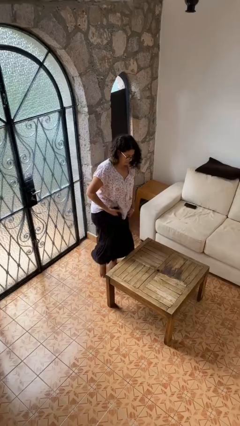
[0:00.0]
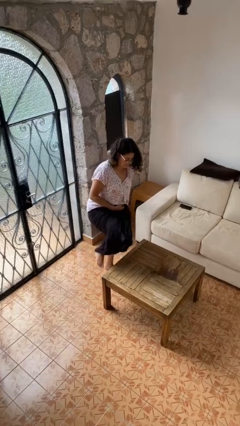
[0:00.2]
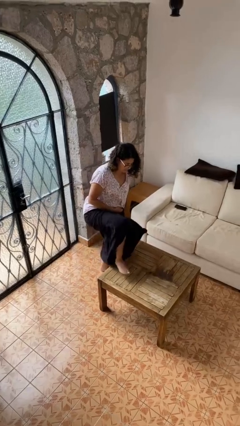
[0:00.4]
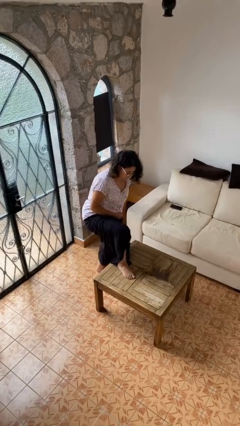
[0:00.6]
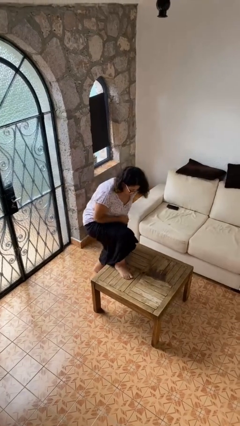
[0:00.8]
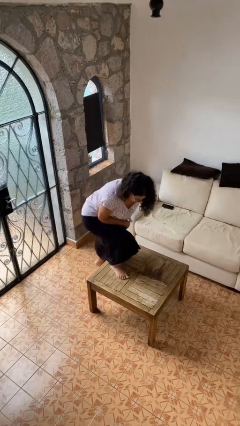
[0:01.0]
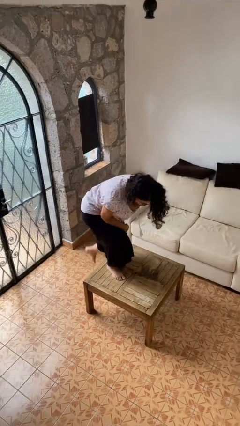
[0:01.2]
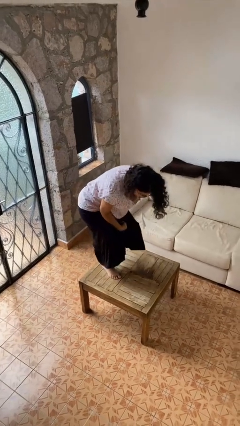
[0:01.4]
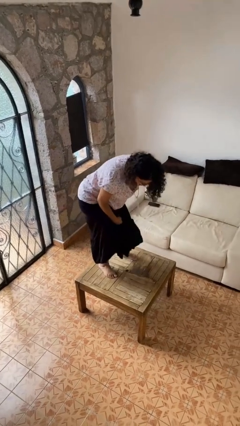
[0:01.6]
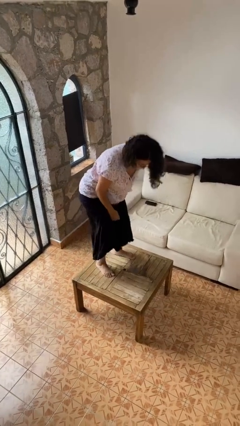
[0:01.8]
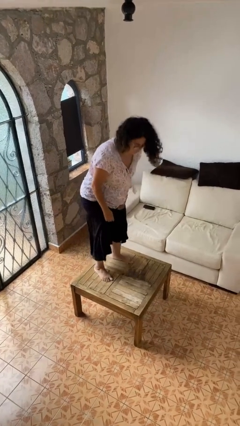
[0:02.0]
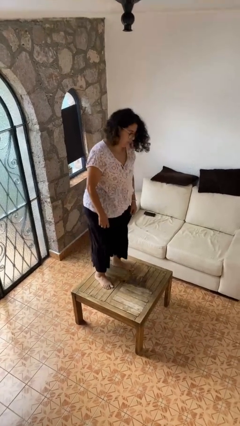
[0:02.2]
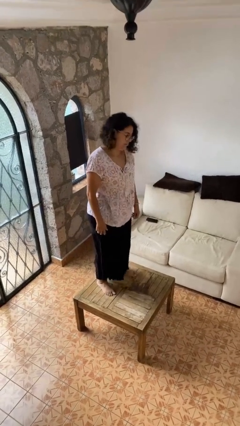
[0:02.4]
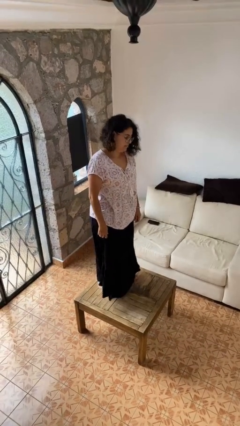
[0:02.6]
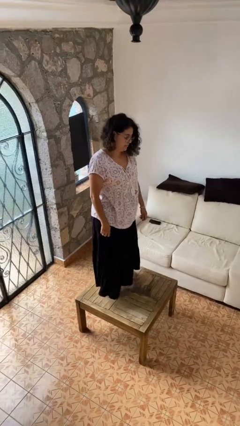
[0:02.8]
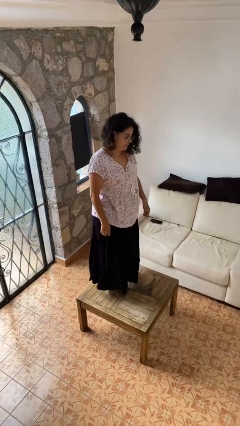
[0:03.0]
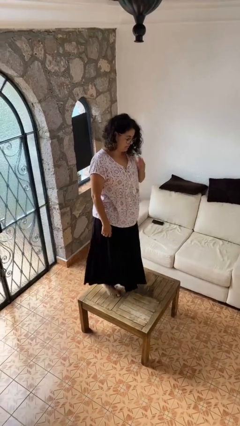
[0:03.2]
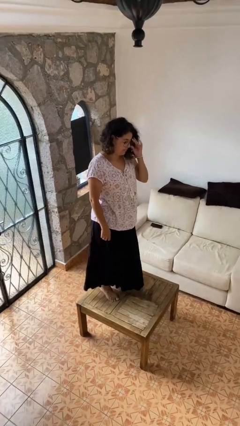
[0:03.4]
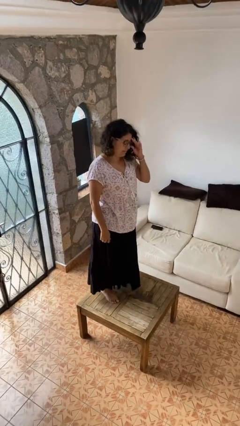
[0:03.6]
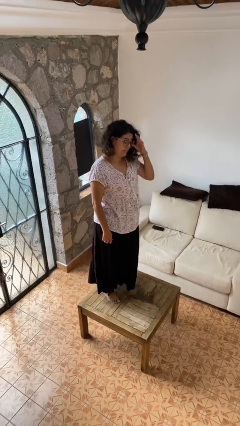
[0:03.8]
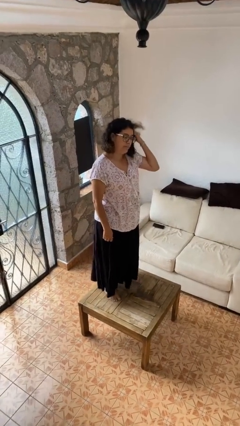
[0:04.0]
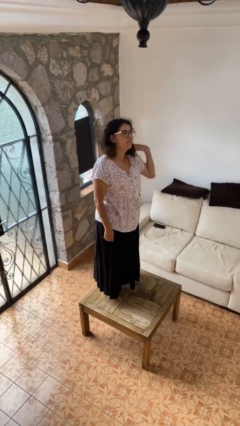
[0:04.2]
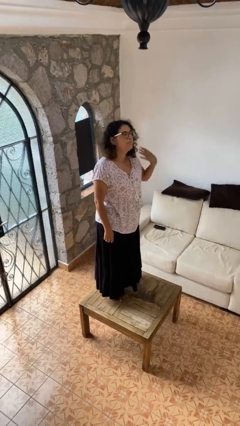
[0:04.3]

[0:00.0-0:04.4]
person climbs on table

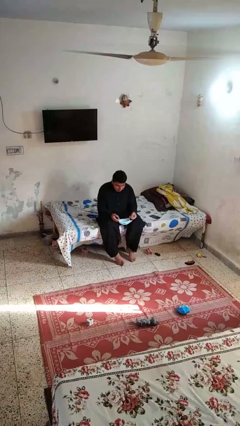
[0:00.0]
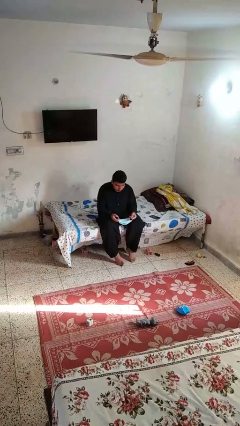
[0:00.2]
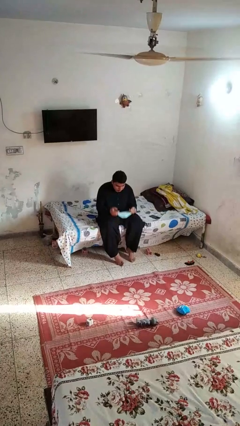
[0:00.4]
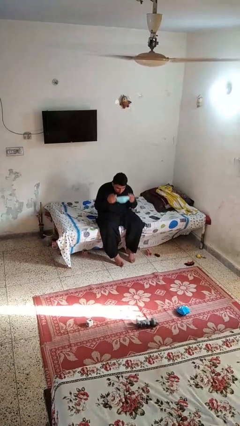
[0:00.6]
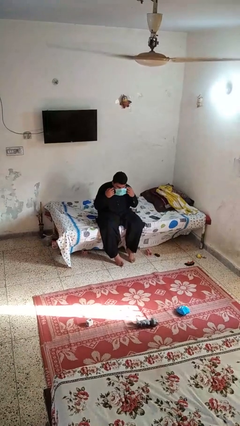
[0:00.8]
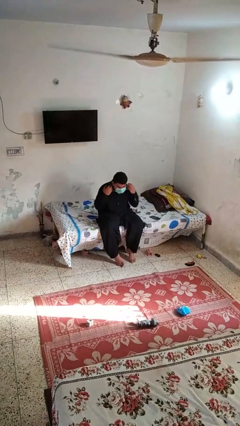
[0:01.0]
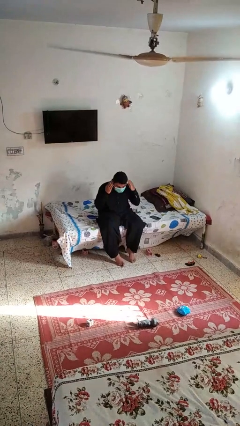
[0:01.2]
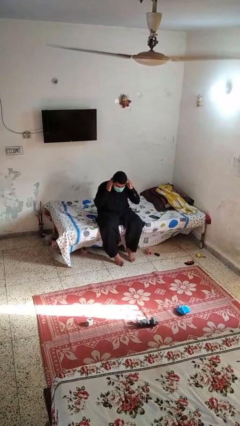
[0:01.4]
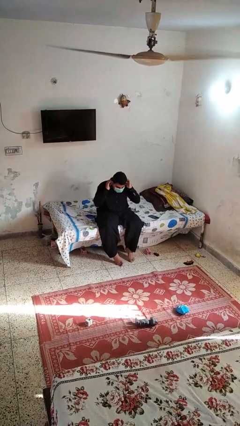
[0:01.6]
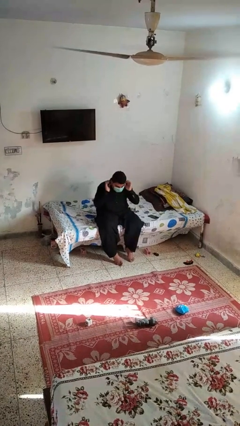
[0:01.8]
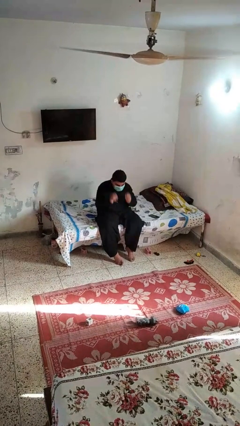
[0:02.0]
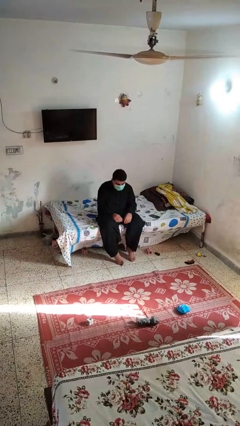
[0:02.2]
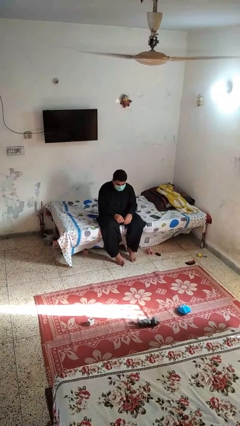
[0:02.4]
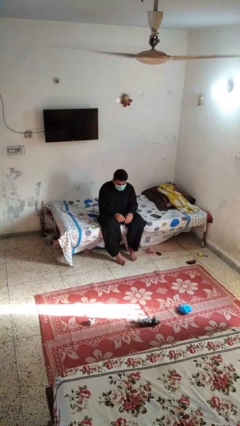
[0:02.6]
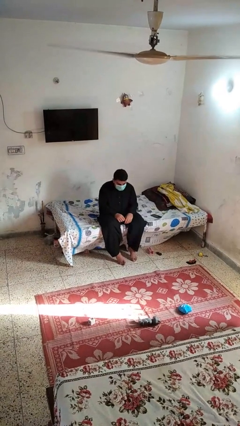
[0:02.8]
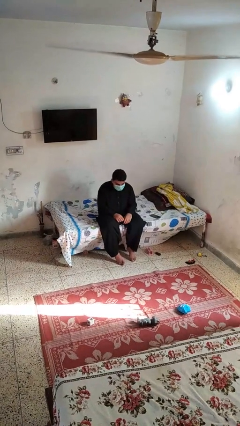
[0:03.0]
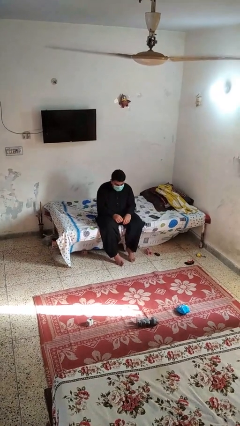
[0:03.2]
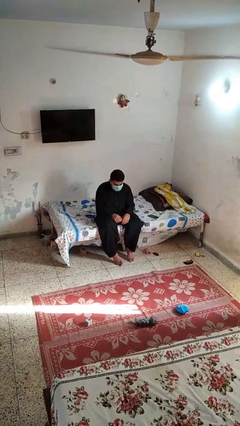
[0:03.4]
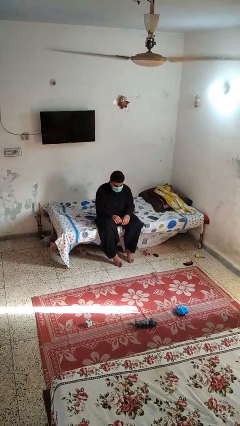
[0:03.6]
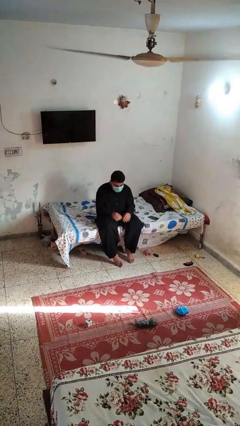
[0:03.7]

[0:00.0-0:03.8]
person puts on facemask

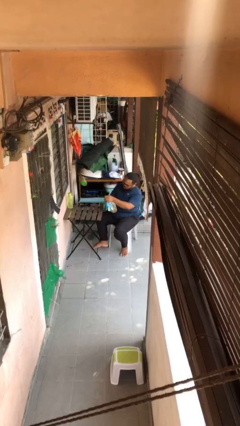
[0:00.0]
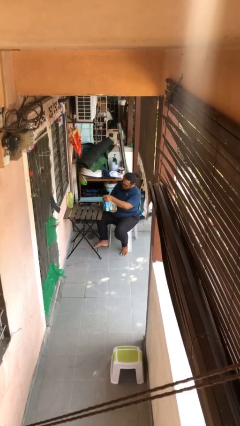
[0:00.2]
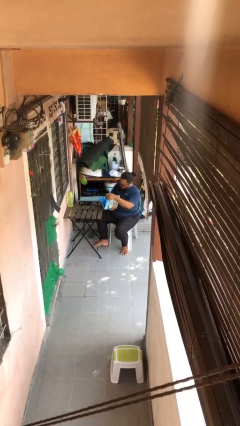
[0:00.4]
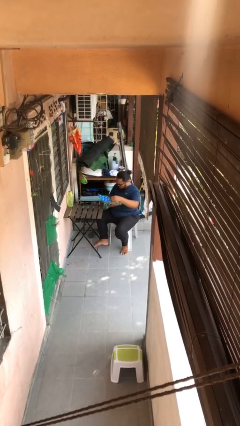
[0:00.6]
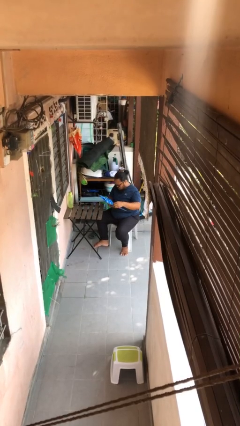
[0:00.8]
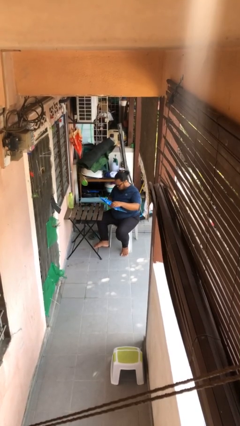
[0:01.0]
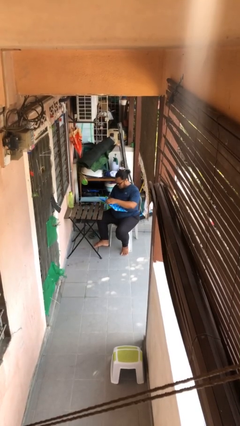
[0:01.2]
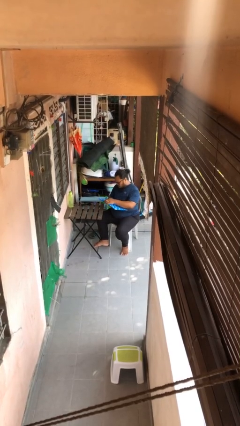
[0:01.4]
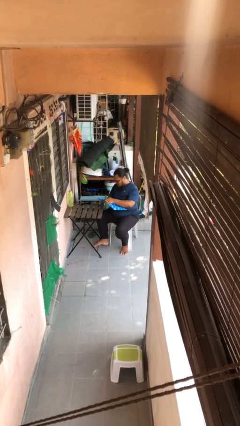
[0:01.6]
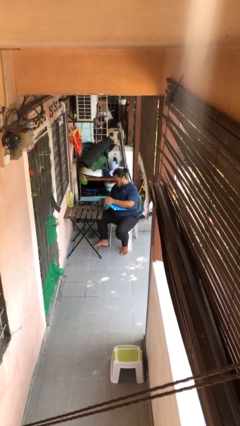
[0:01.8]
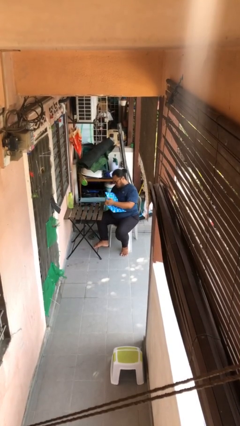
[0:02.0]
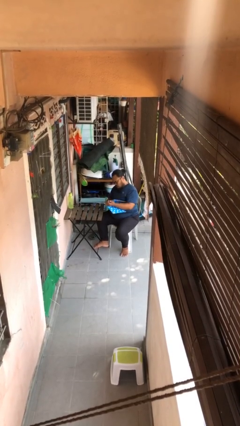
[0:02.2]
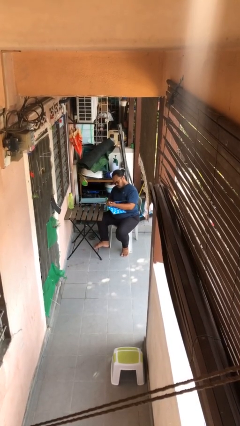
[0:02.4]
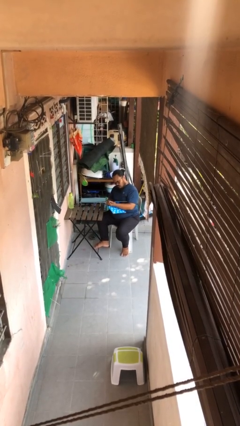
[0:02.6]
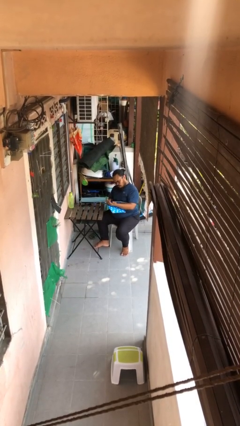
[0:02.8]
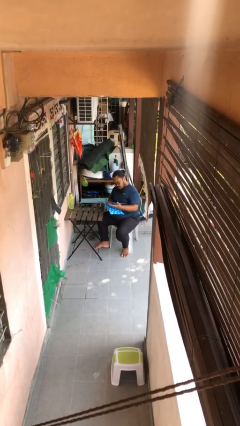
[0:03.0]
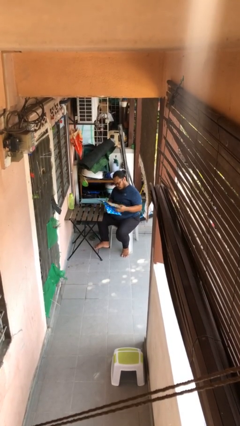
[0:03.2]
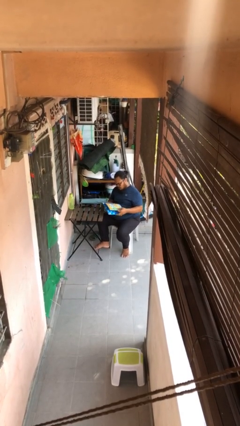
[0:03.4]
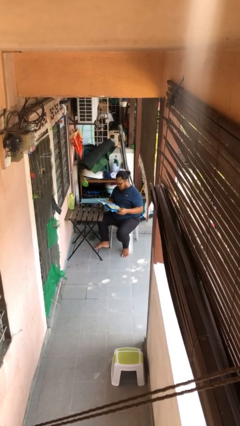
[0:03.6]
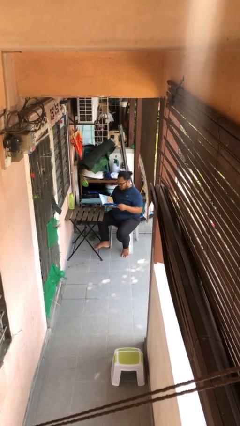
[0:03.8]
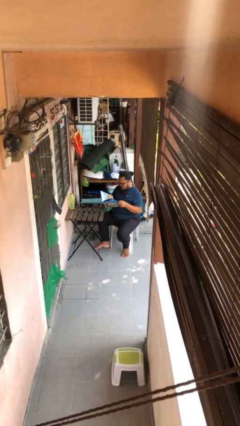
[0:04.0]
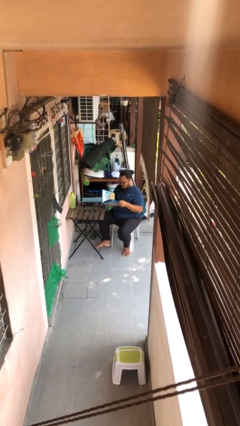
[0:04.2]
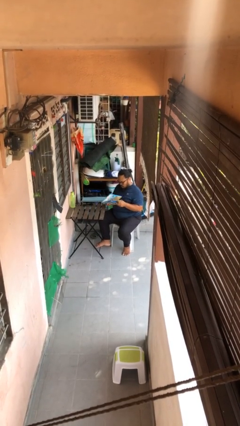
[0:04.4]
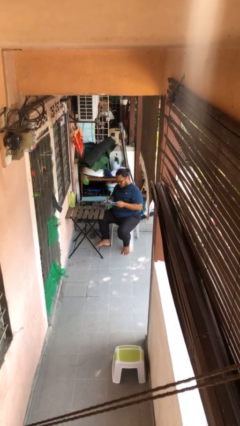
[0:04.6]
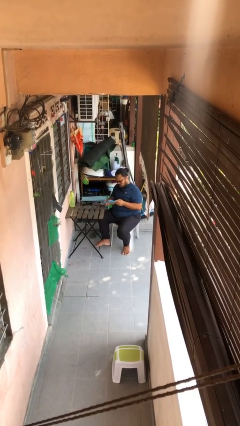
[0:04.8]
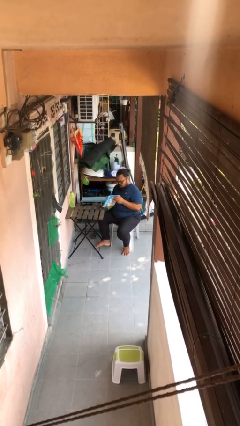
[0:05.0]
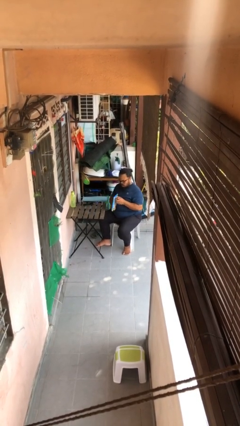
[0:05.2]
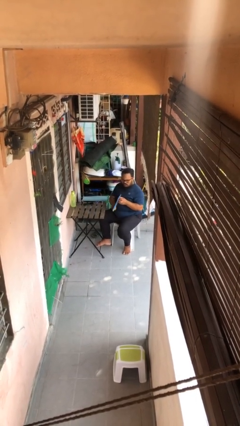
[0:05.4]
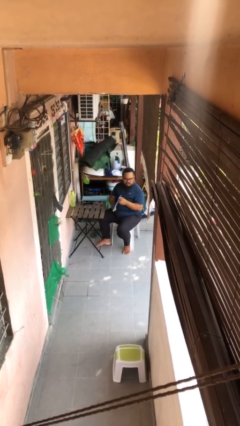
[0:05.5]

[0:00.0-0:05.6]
person reads document

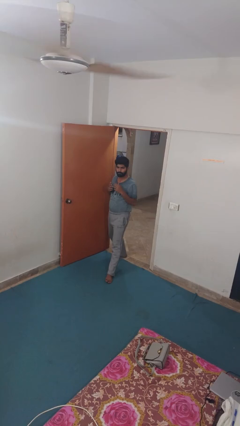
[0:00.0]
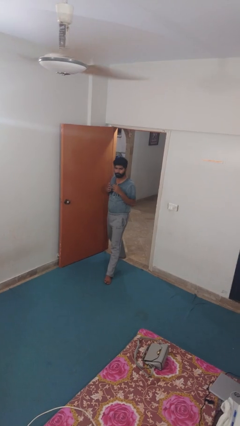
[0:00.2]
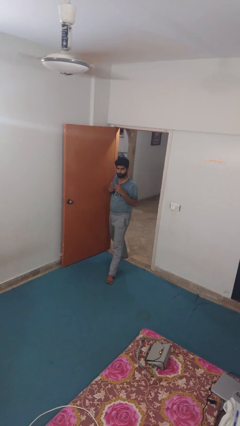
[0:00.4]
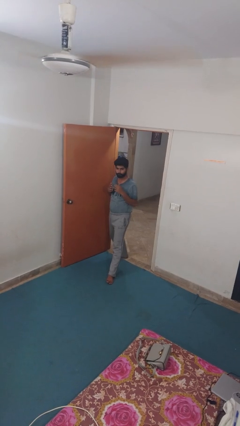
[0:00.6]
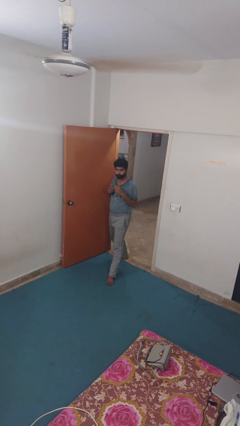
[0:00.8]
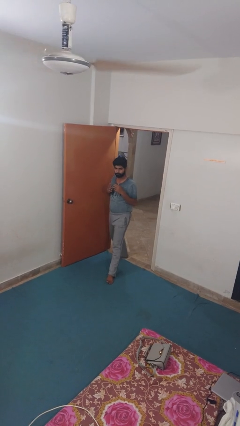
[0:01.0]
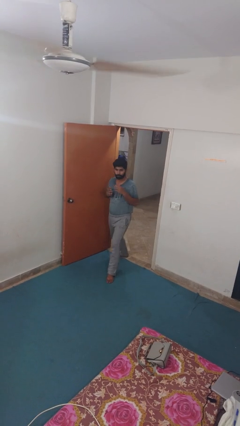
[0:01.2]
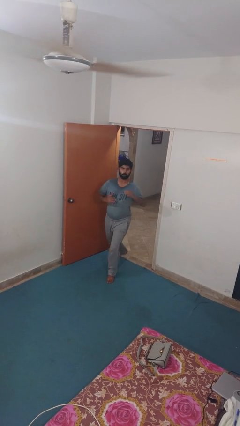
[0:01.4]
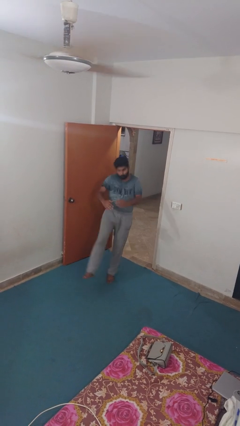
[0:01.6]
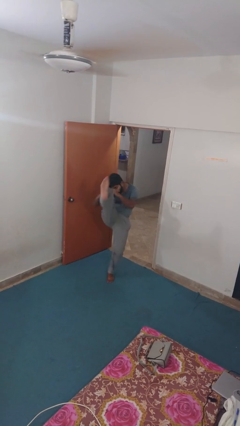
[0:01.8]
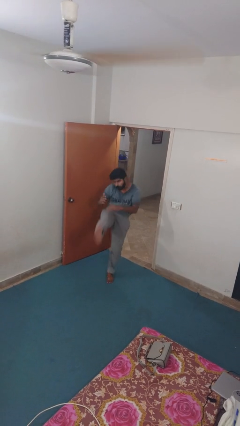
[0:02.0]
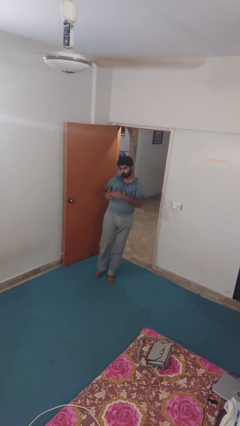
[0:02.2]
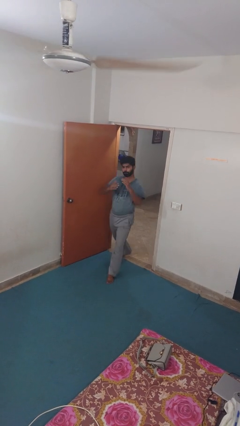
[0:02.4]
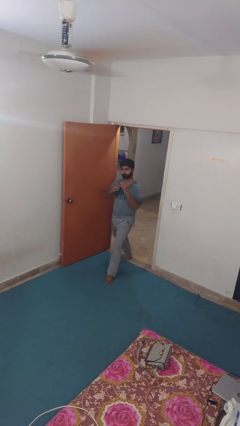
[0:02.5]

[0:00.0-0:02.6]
person karate kicks

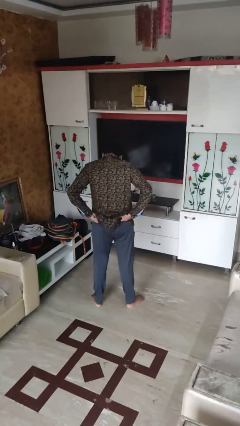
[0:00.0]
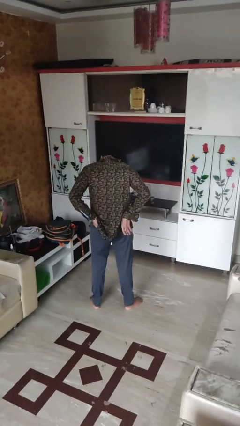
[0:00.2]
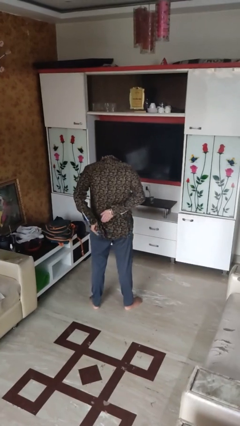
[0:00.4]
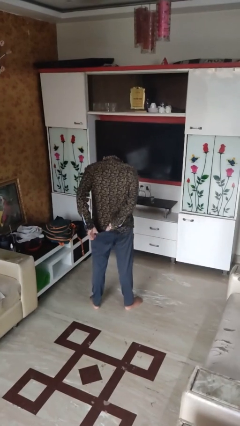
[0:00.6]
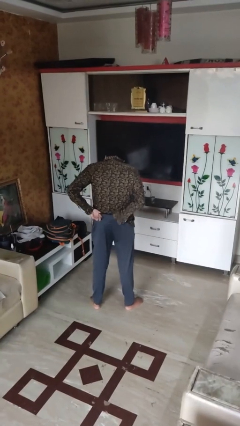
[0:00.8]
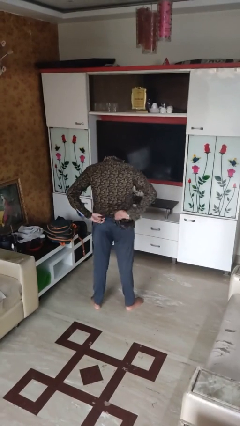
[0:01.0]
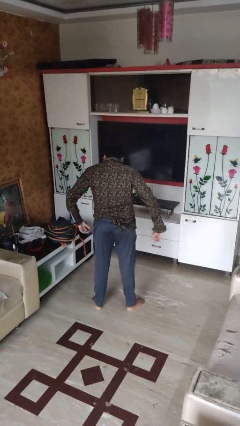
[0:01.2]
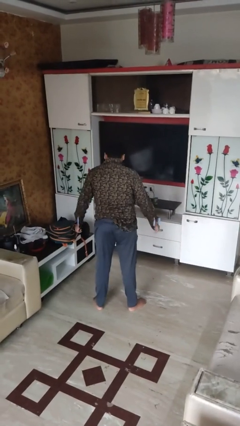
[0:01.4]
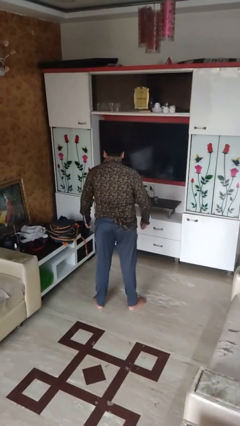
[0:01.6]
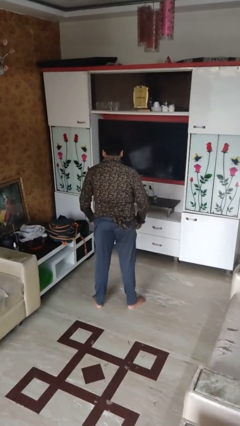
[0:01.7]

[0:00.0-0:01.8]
person tucks in shirt
